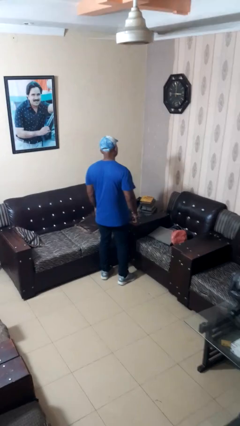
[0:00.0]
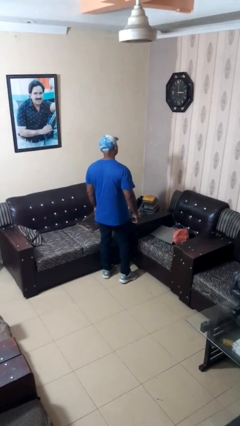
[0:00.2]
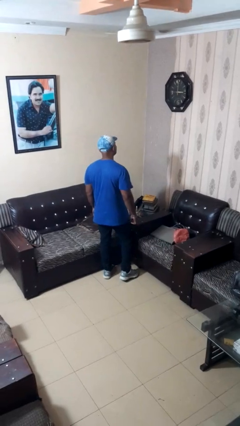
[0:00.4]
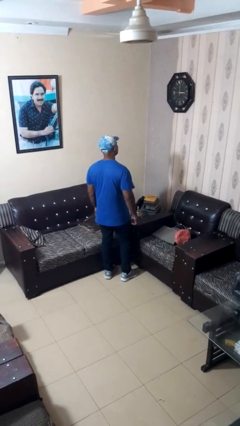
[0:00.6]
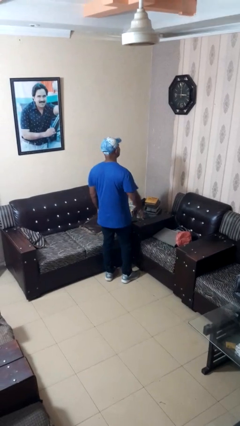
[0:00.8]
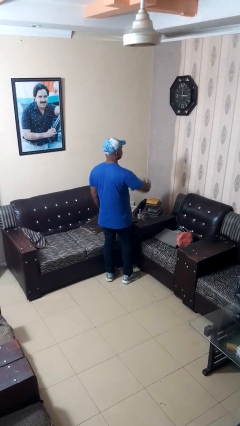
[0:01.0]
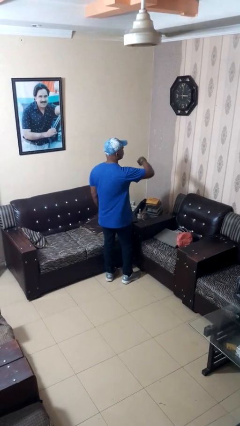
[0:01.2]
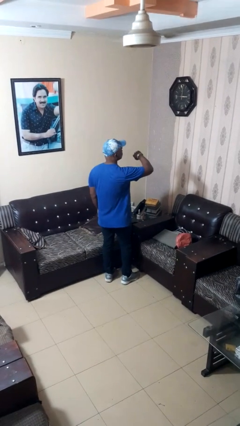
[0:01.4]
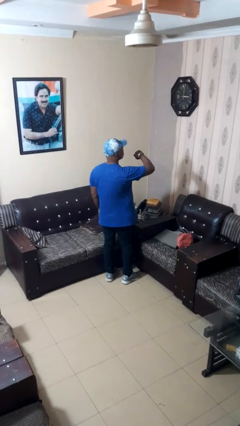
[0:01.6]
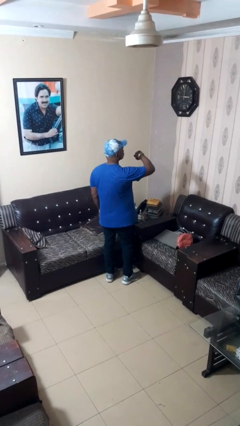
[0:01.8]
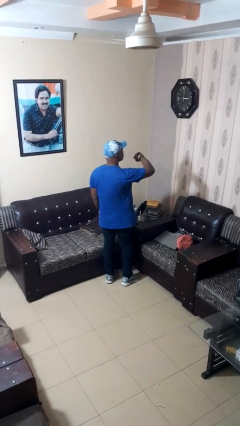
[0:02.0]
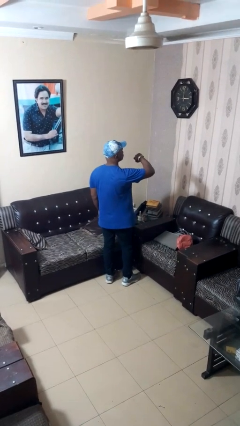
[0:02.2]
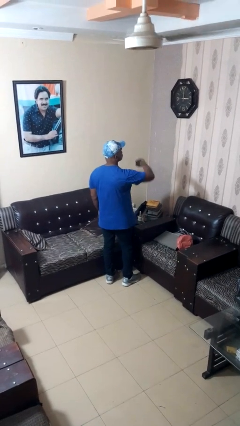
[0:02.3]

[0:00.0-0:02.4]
person looks at wristwatch

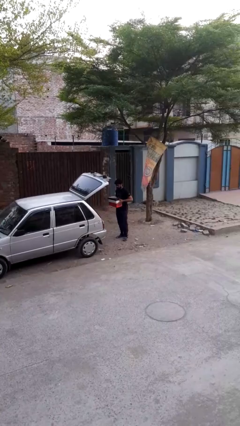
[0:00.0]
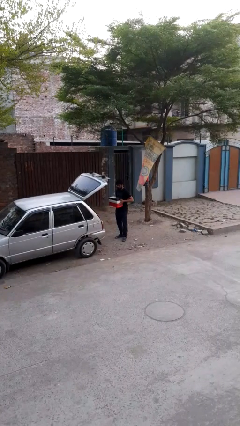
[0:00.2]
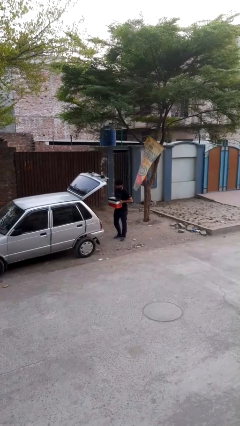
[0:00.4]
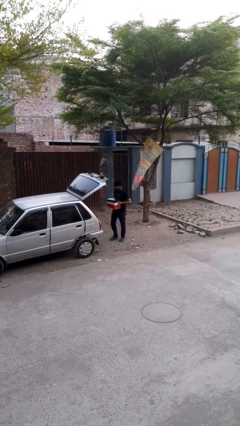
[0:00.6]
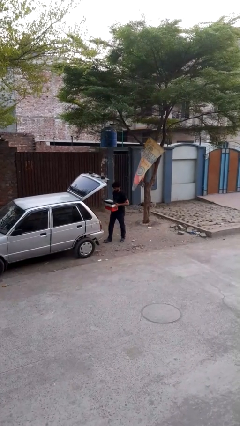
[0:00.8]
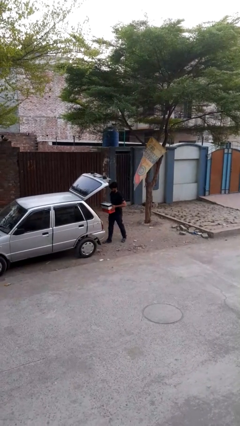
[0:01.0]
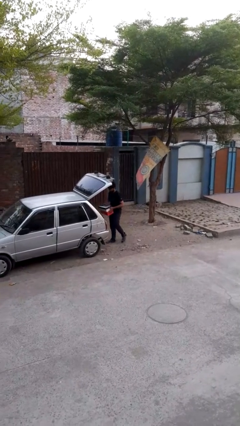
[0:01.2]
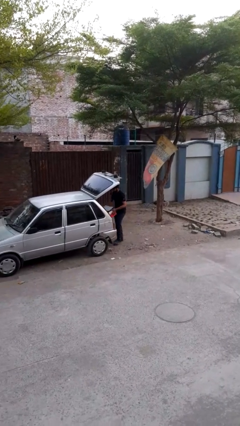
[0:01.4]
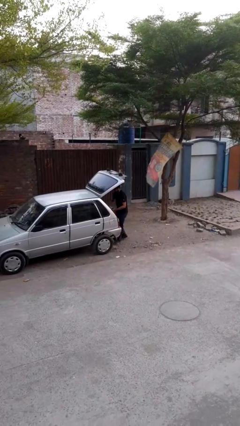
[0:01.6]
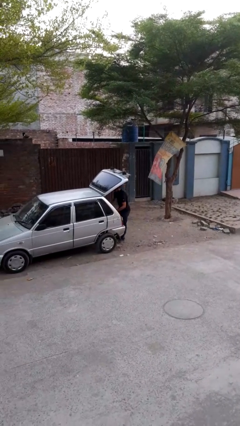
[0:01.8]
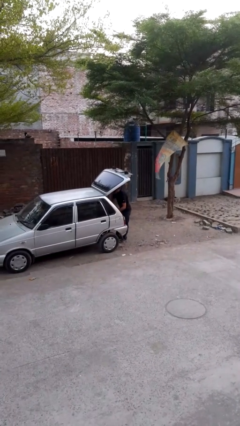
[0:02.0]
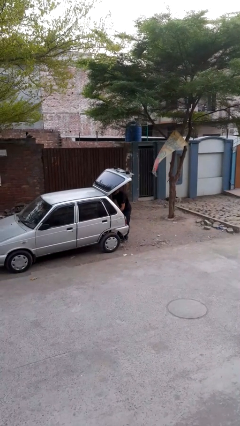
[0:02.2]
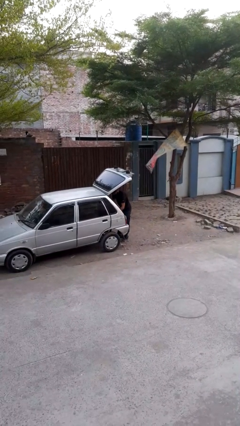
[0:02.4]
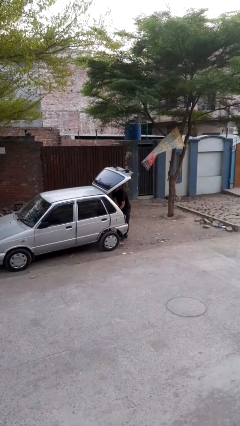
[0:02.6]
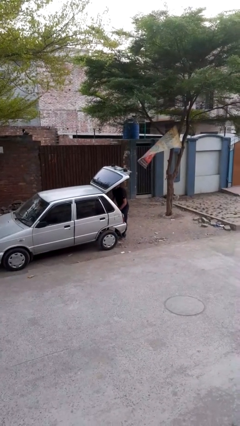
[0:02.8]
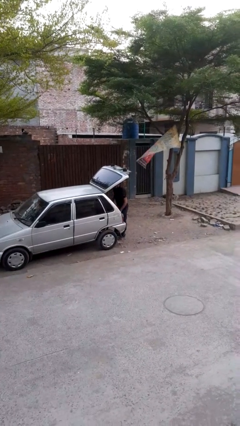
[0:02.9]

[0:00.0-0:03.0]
person loads car

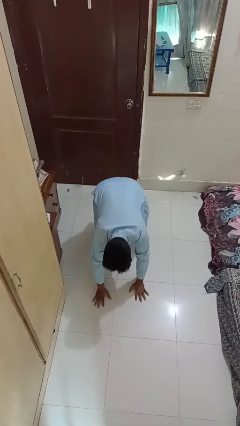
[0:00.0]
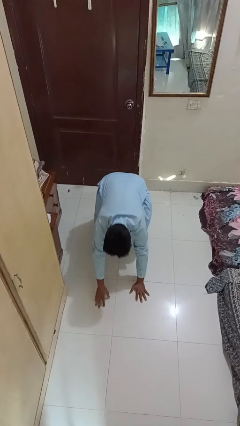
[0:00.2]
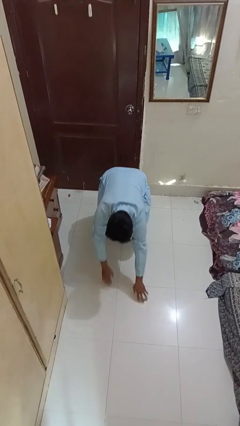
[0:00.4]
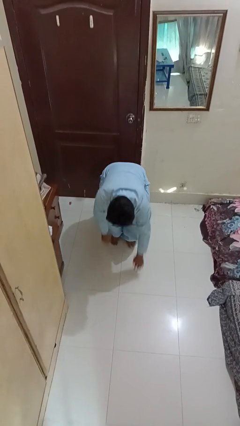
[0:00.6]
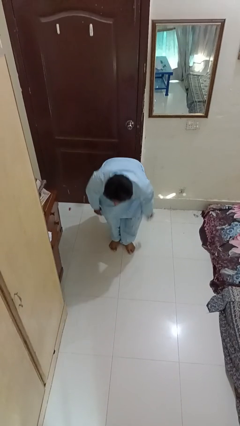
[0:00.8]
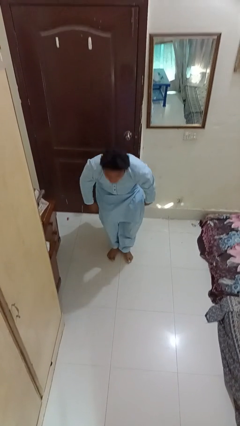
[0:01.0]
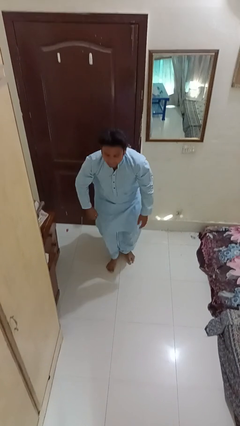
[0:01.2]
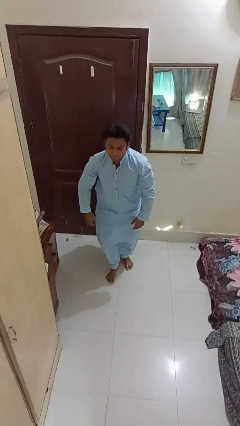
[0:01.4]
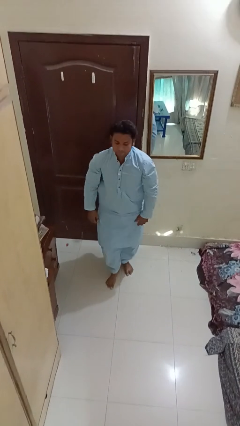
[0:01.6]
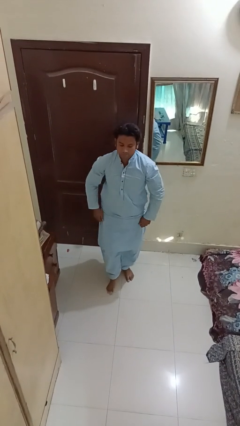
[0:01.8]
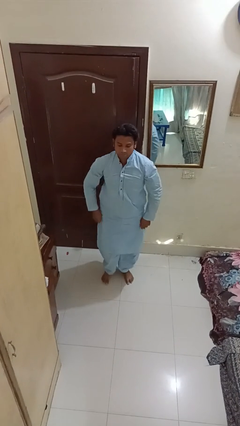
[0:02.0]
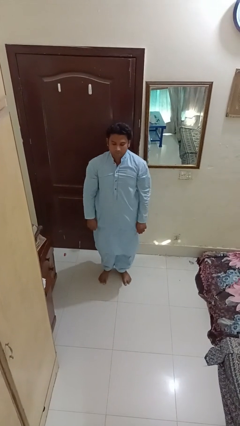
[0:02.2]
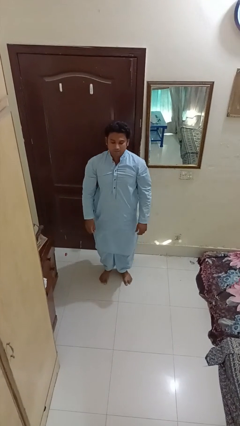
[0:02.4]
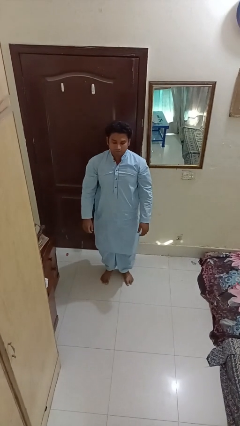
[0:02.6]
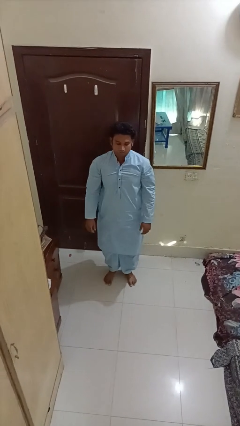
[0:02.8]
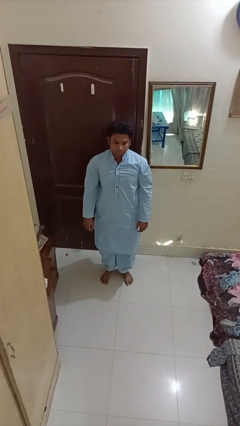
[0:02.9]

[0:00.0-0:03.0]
person stands up from floor

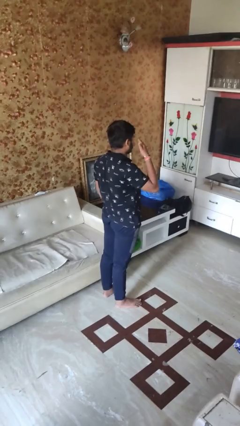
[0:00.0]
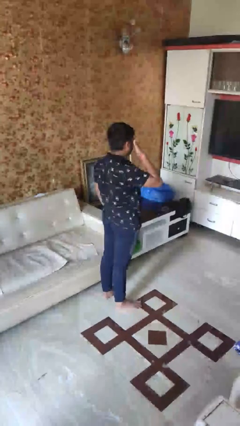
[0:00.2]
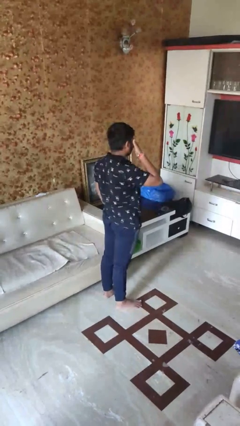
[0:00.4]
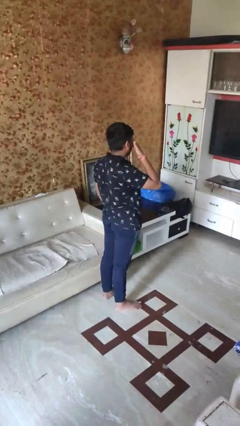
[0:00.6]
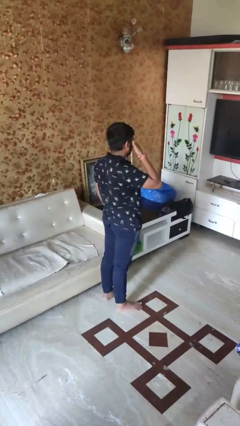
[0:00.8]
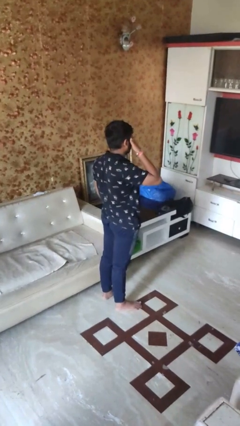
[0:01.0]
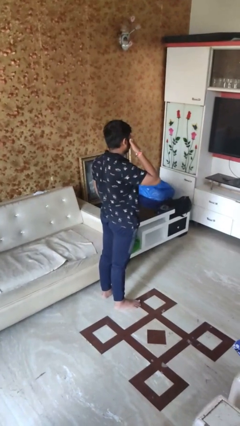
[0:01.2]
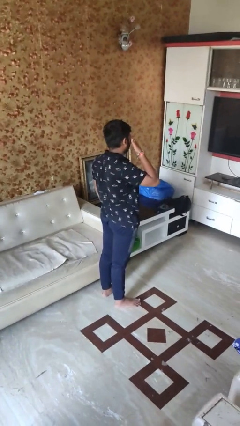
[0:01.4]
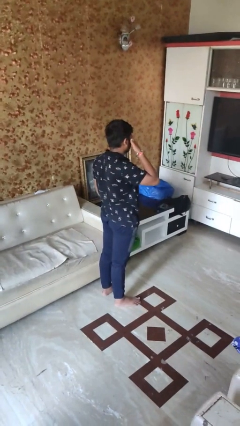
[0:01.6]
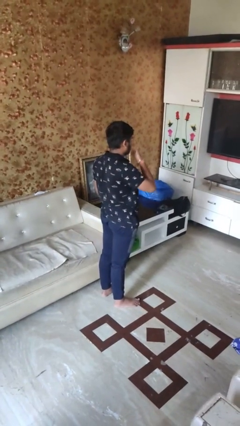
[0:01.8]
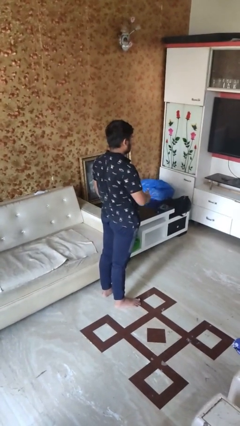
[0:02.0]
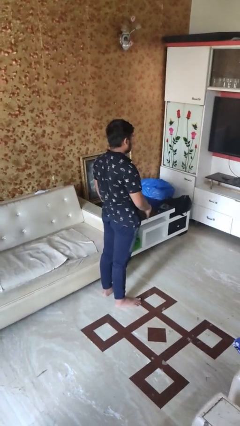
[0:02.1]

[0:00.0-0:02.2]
person rubs eyes

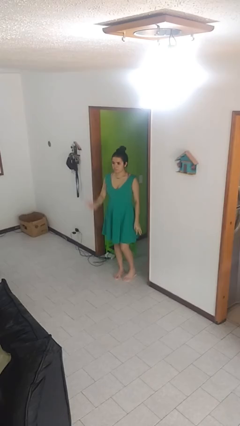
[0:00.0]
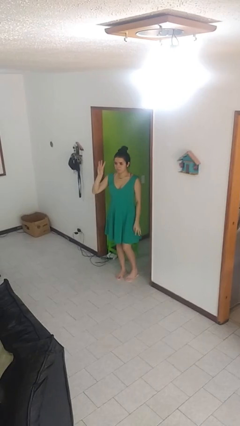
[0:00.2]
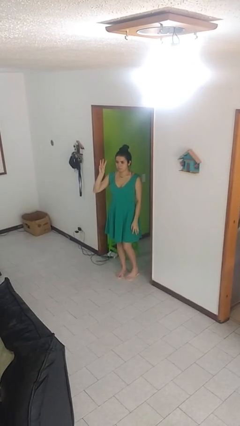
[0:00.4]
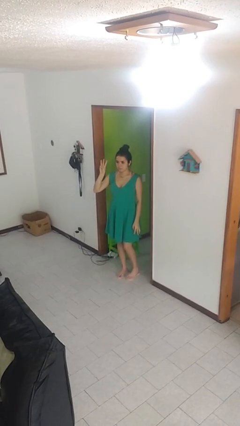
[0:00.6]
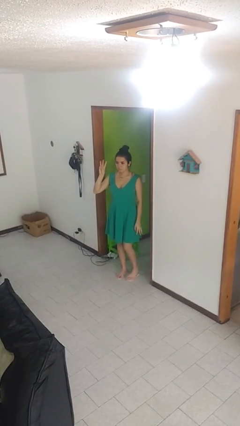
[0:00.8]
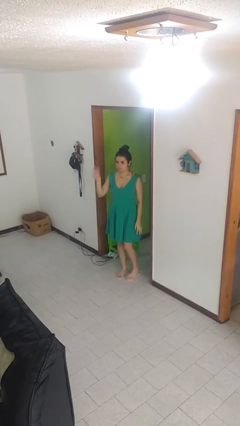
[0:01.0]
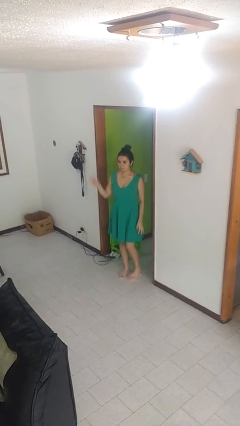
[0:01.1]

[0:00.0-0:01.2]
person gestures number three

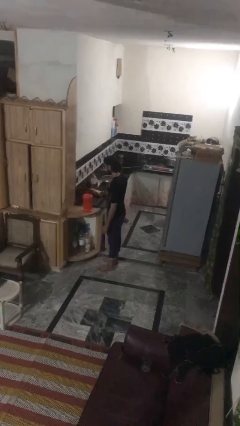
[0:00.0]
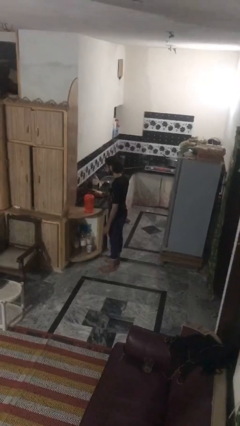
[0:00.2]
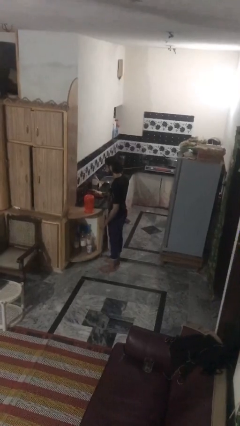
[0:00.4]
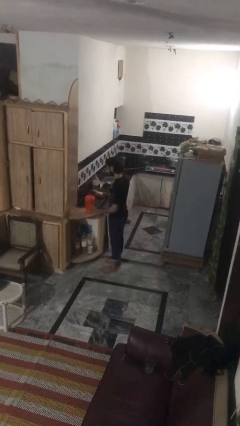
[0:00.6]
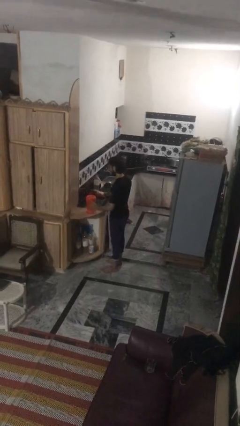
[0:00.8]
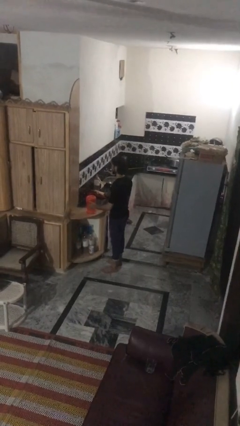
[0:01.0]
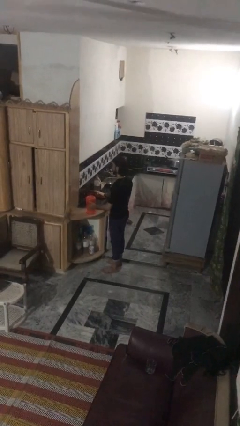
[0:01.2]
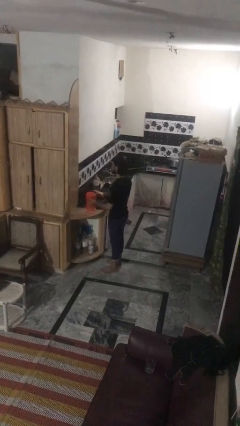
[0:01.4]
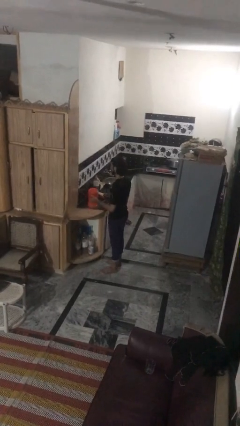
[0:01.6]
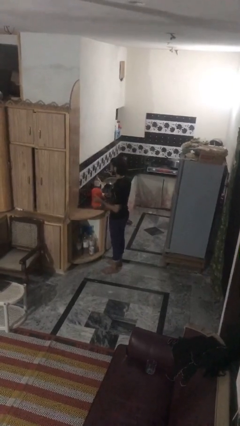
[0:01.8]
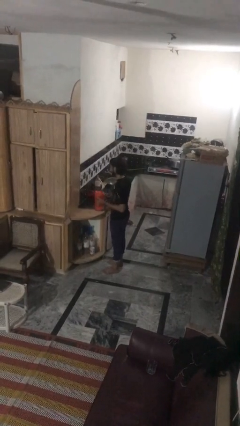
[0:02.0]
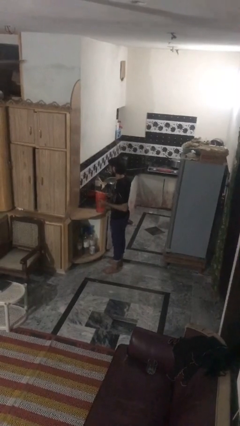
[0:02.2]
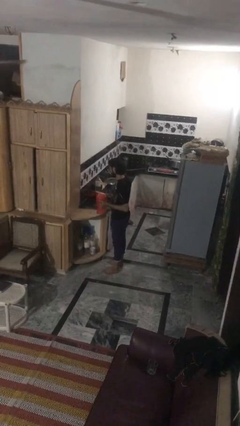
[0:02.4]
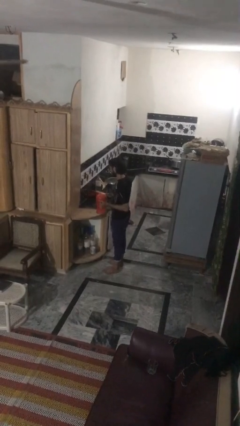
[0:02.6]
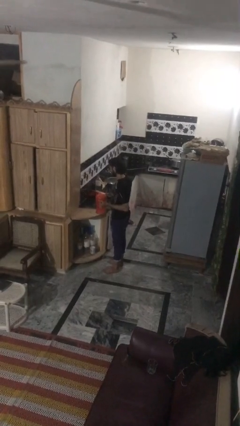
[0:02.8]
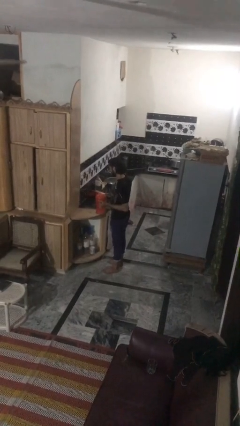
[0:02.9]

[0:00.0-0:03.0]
person picks up object from countertop

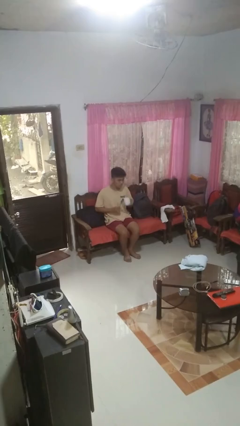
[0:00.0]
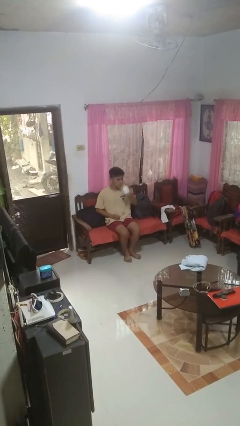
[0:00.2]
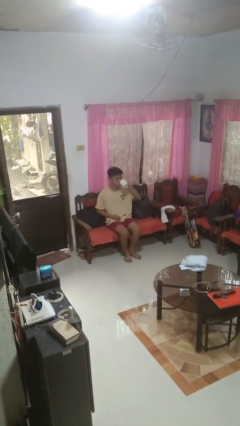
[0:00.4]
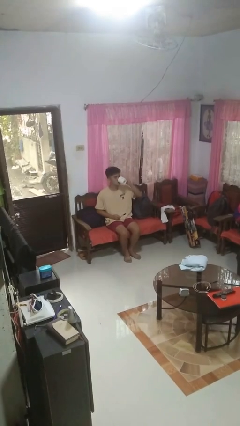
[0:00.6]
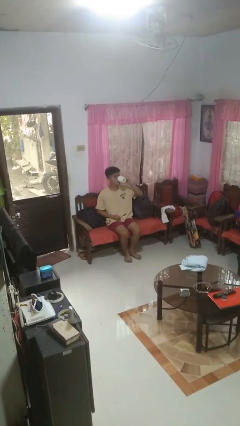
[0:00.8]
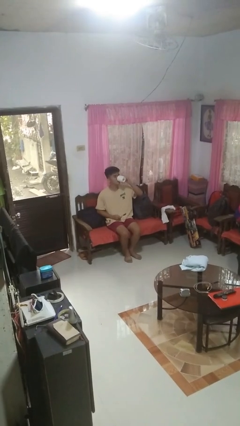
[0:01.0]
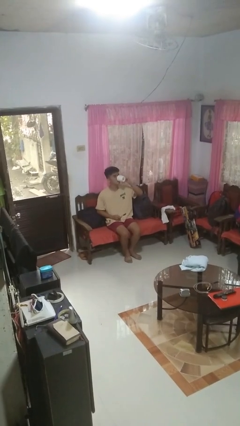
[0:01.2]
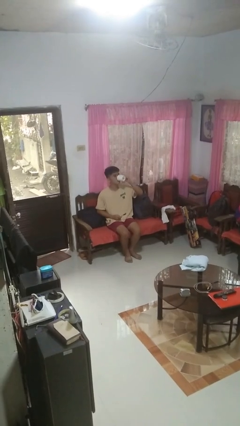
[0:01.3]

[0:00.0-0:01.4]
person drinks from mug

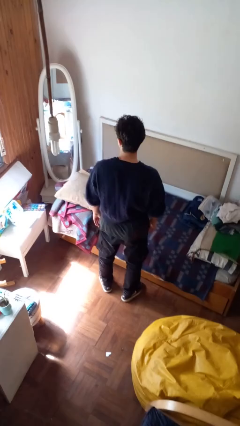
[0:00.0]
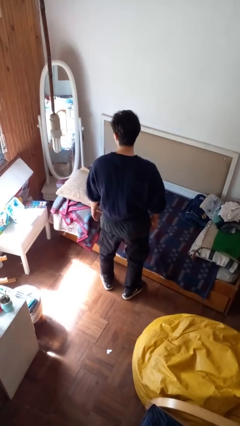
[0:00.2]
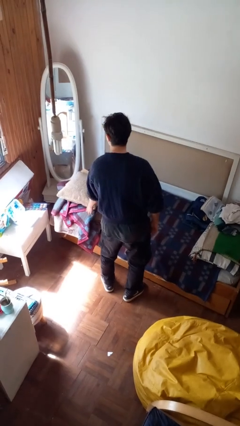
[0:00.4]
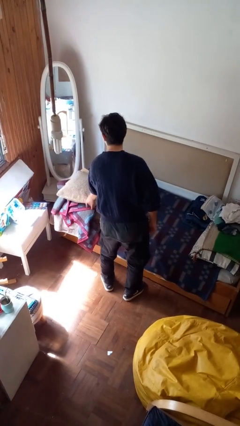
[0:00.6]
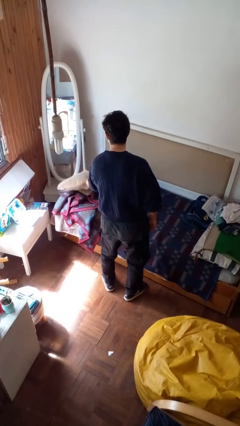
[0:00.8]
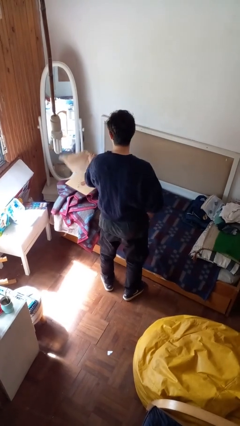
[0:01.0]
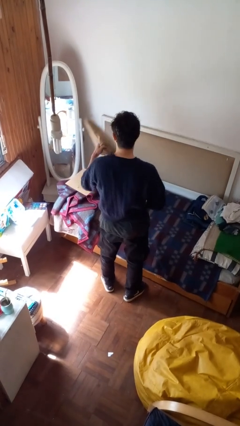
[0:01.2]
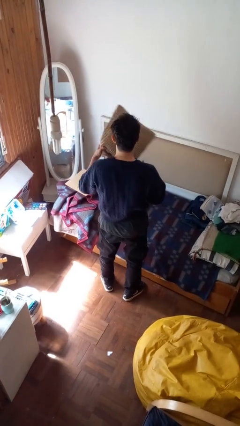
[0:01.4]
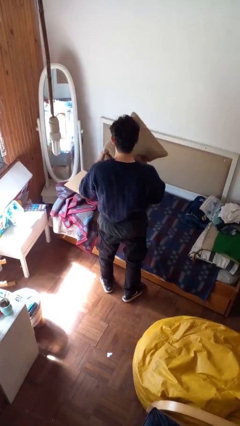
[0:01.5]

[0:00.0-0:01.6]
person picks up object from bed
